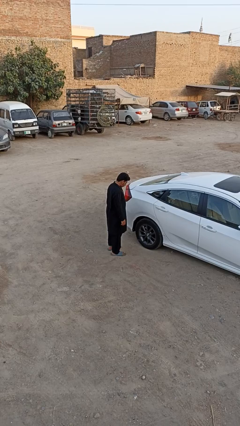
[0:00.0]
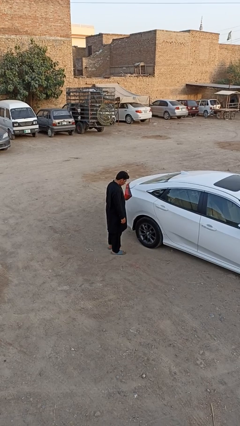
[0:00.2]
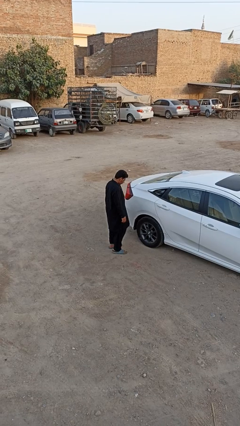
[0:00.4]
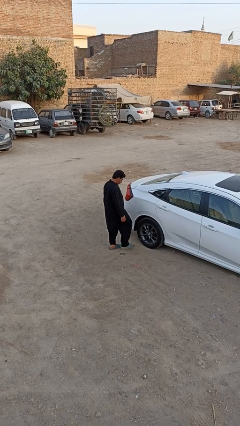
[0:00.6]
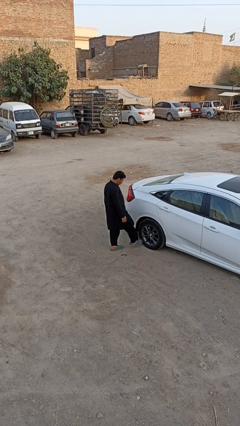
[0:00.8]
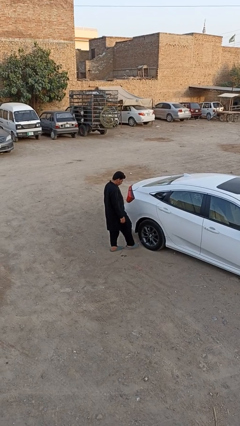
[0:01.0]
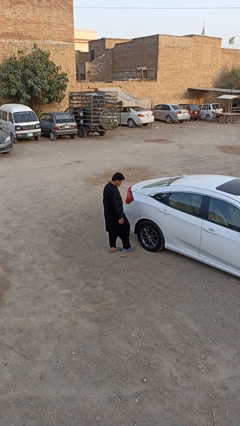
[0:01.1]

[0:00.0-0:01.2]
person kicks car tires

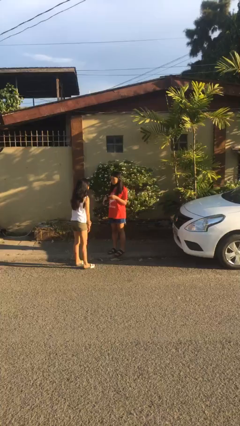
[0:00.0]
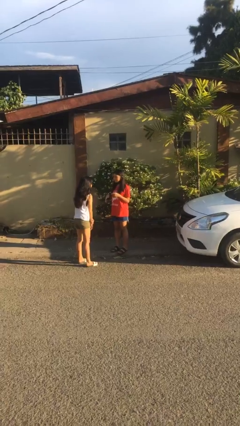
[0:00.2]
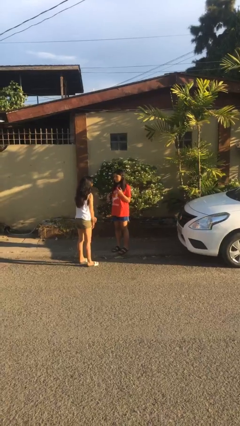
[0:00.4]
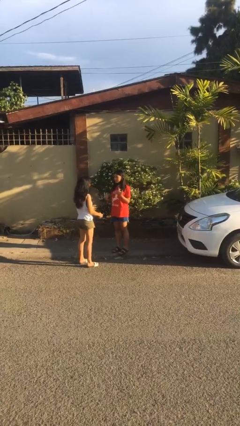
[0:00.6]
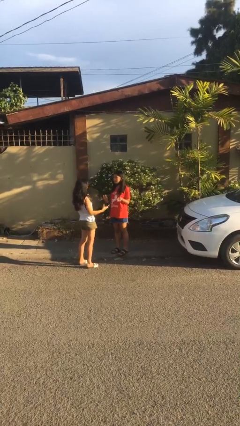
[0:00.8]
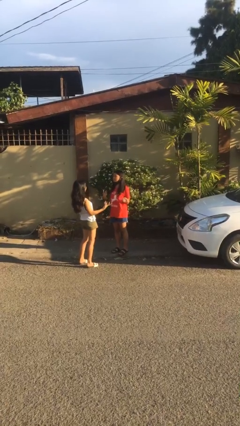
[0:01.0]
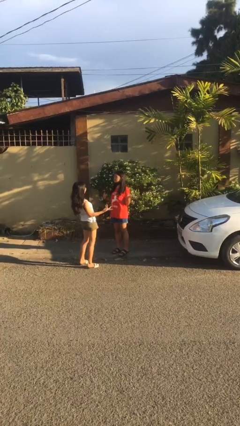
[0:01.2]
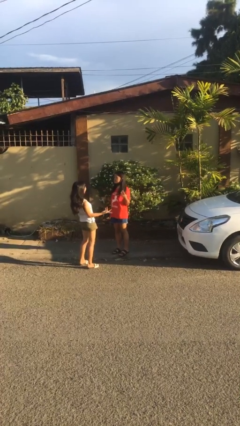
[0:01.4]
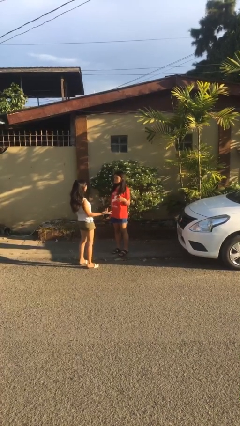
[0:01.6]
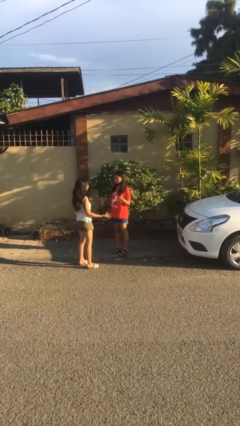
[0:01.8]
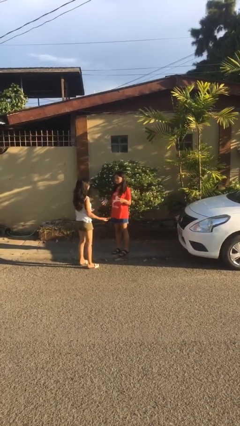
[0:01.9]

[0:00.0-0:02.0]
person laughs with person

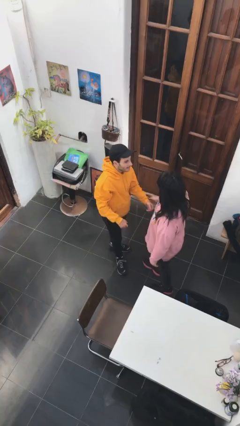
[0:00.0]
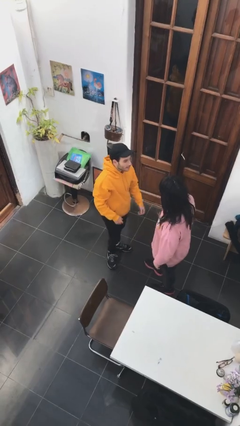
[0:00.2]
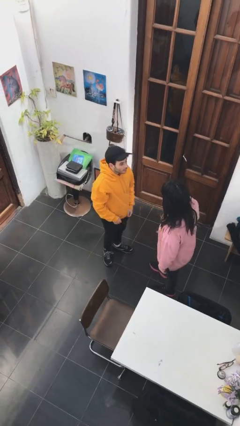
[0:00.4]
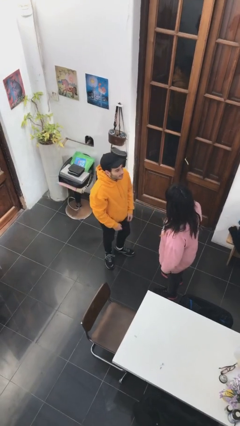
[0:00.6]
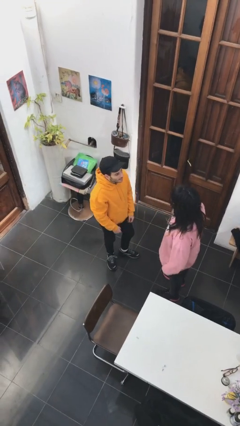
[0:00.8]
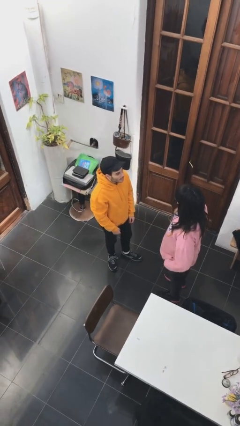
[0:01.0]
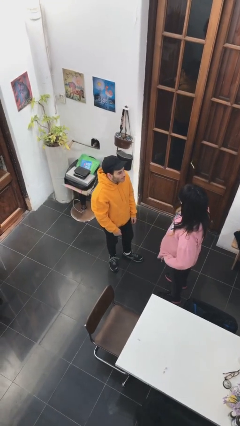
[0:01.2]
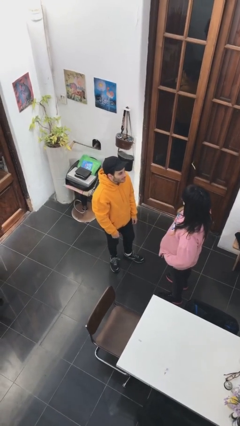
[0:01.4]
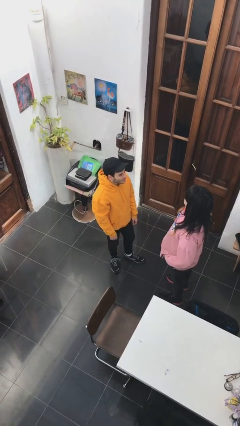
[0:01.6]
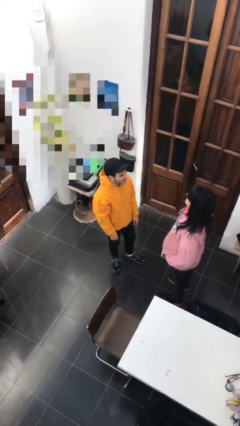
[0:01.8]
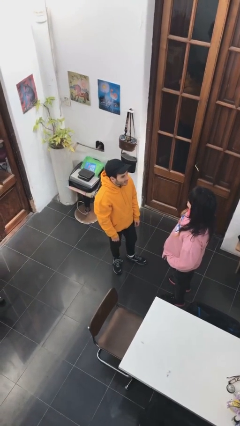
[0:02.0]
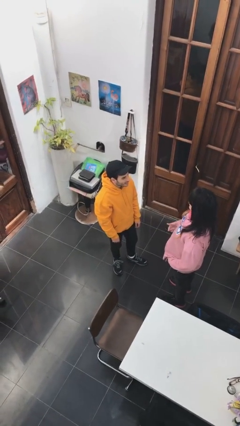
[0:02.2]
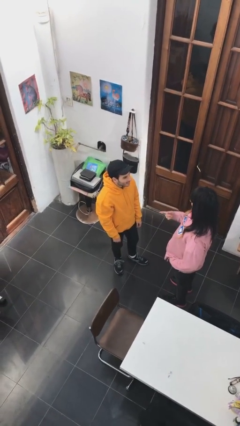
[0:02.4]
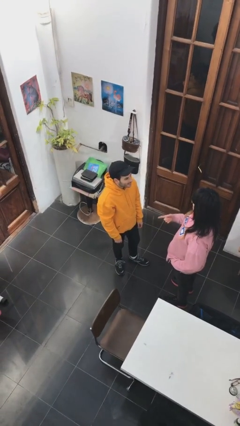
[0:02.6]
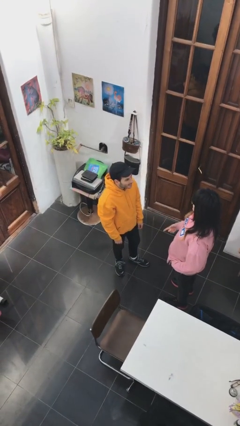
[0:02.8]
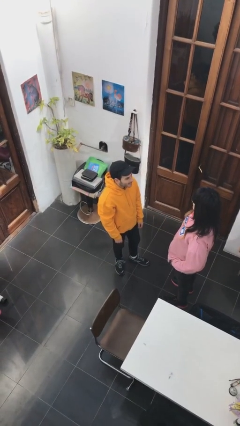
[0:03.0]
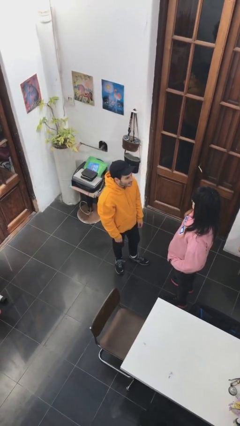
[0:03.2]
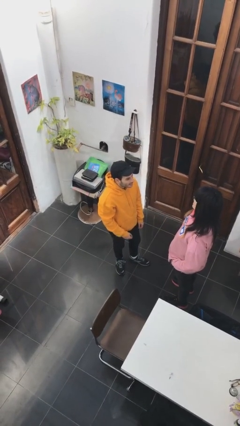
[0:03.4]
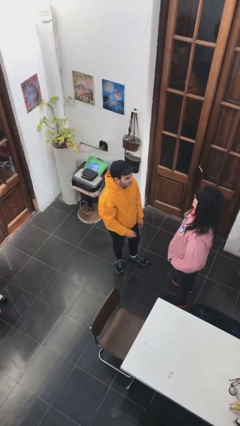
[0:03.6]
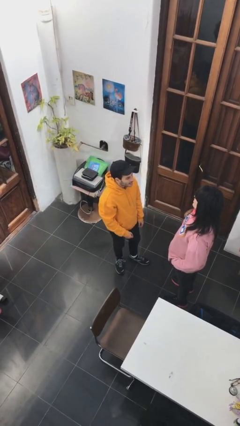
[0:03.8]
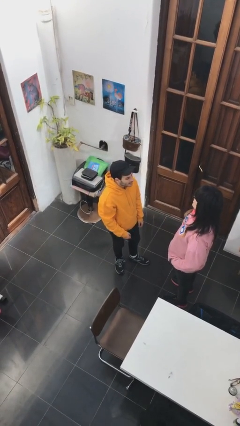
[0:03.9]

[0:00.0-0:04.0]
person talks to person

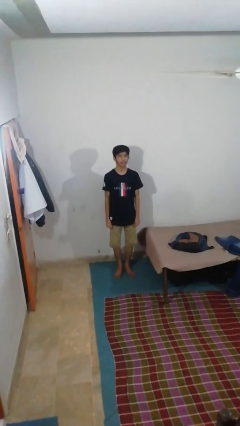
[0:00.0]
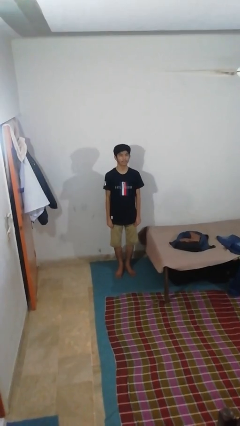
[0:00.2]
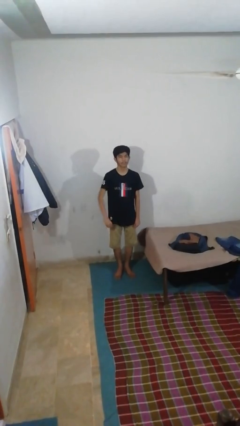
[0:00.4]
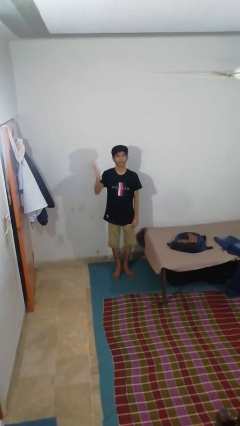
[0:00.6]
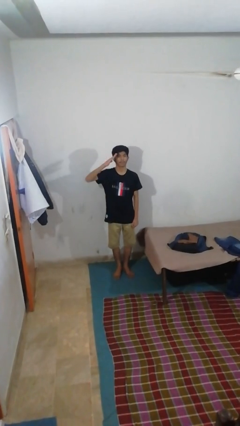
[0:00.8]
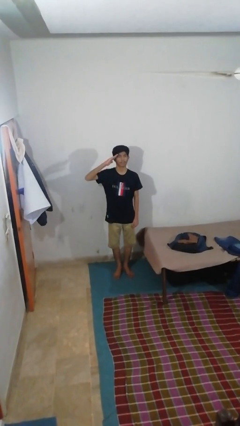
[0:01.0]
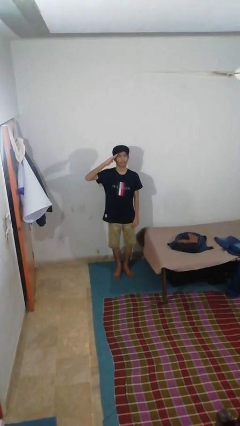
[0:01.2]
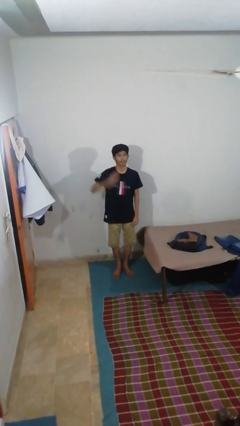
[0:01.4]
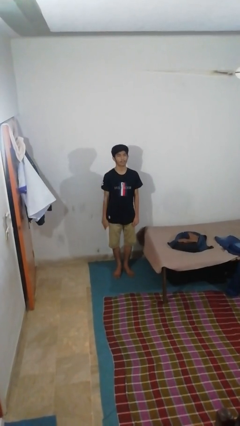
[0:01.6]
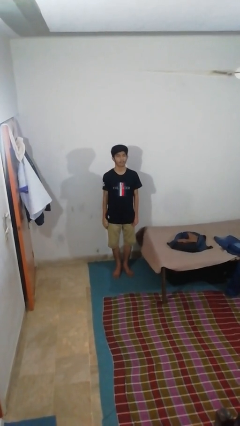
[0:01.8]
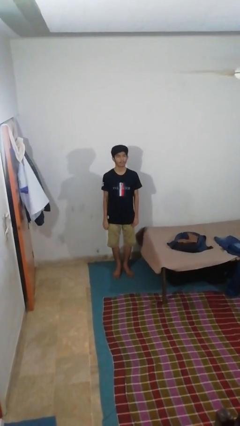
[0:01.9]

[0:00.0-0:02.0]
person salutes

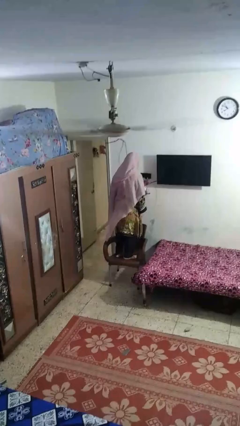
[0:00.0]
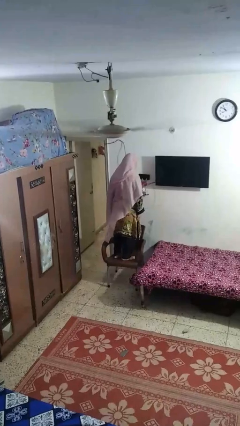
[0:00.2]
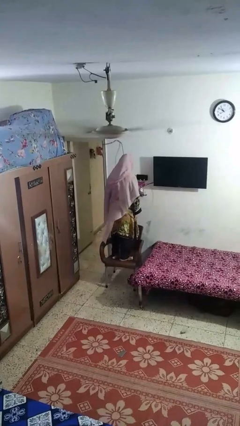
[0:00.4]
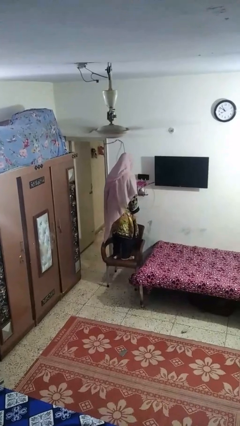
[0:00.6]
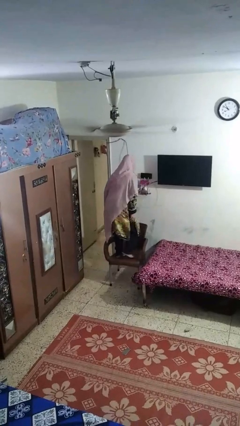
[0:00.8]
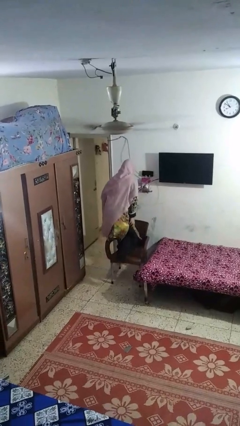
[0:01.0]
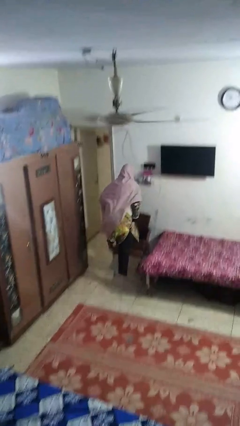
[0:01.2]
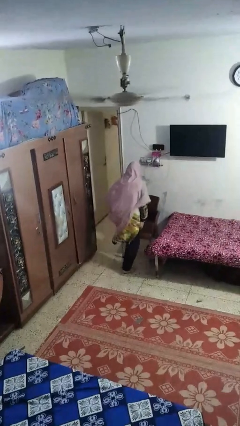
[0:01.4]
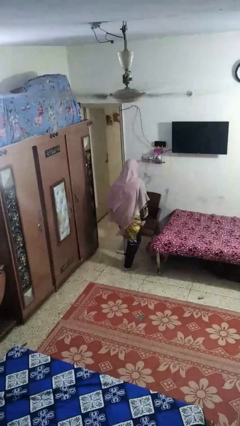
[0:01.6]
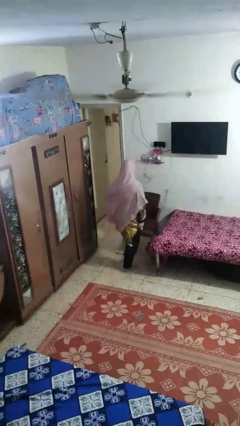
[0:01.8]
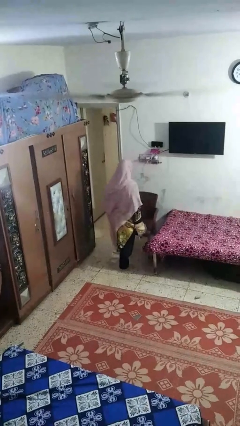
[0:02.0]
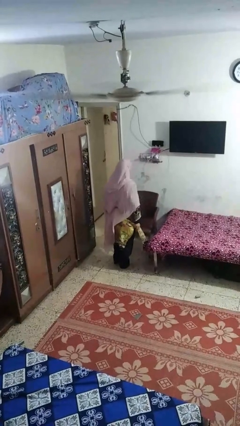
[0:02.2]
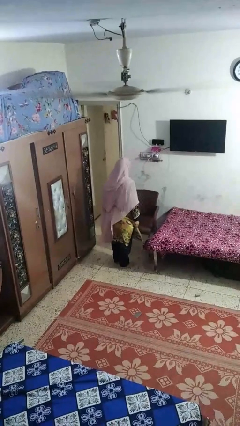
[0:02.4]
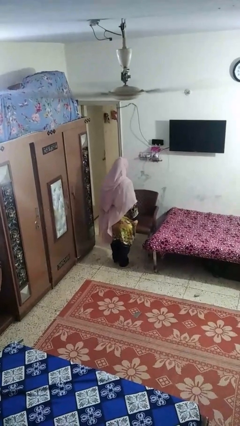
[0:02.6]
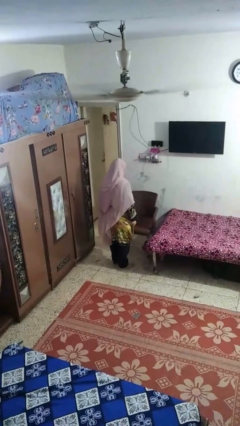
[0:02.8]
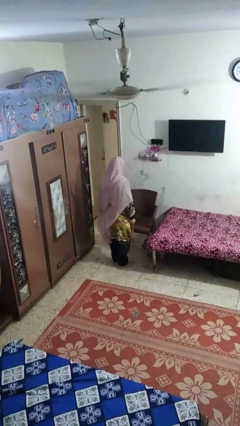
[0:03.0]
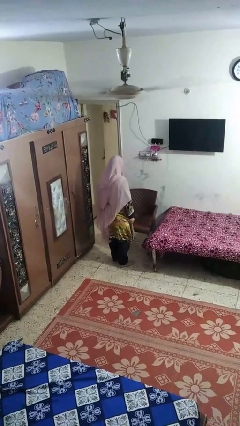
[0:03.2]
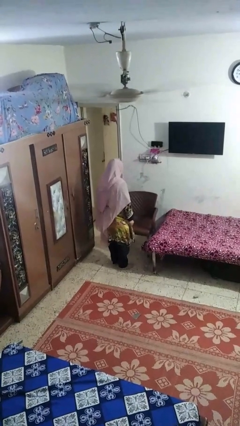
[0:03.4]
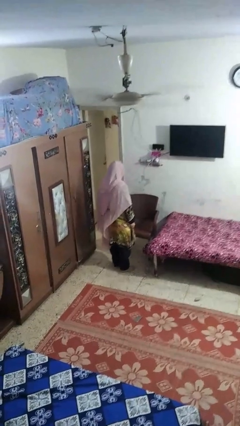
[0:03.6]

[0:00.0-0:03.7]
person climbs off chair

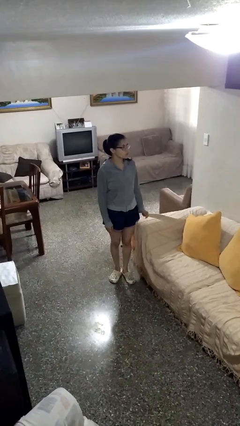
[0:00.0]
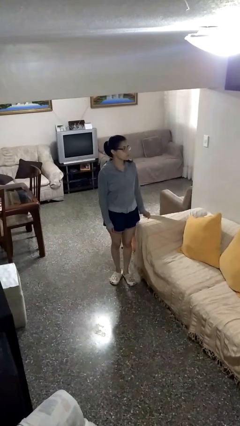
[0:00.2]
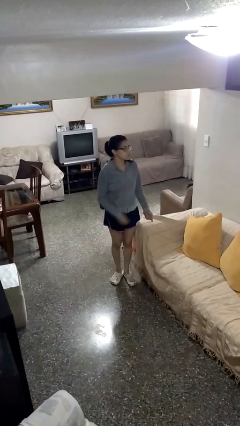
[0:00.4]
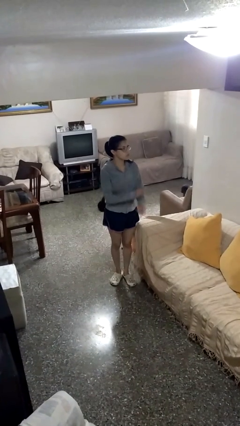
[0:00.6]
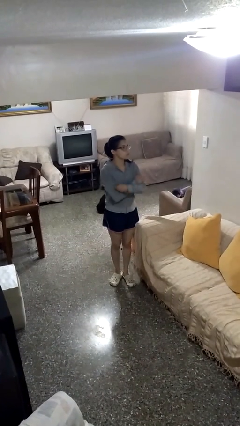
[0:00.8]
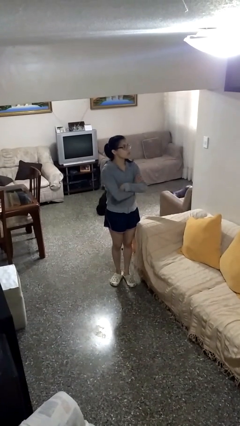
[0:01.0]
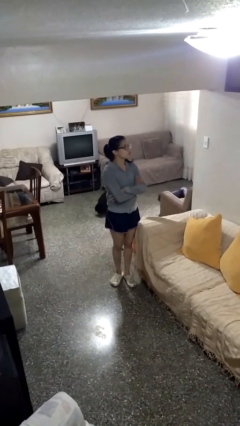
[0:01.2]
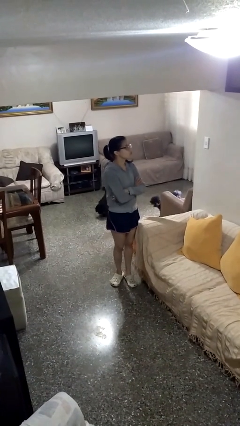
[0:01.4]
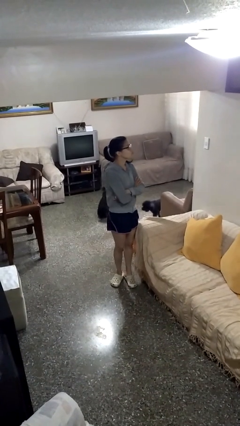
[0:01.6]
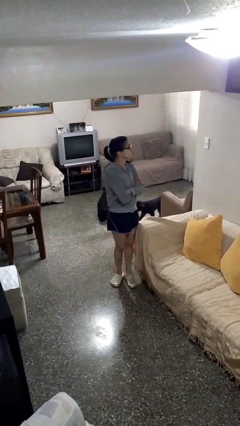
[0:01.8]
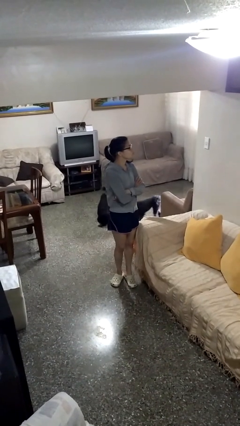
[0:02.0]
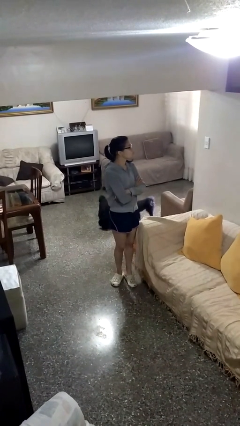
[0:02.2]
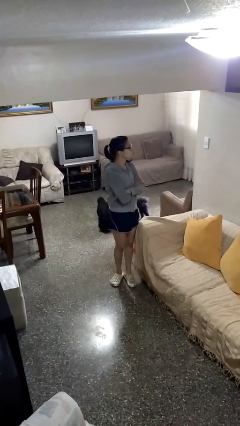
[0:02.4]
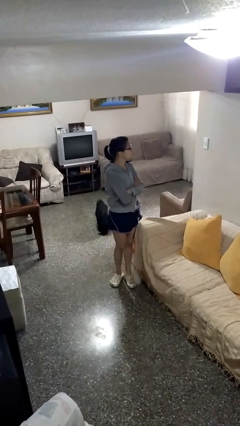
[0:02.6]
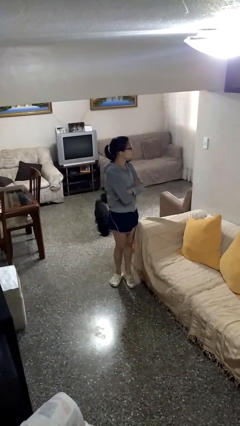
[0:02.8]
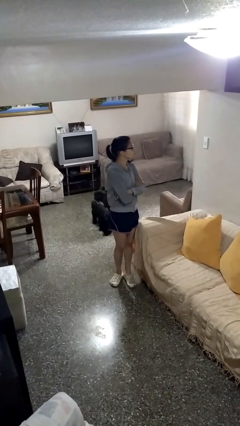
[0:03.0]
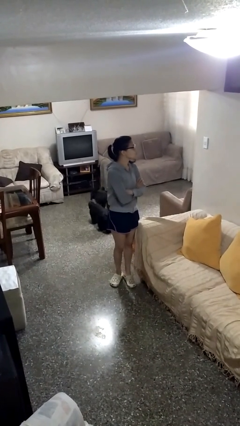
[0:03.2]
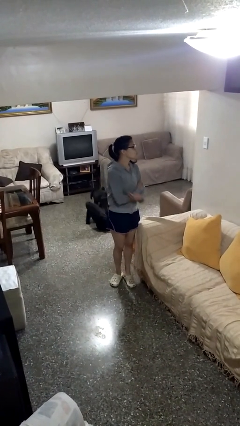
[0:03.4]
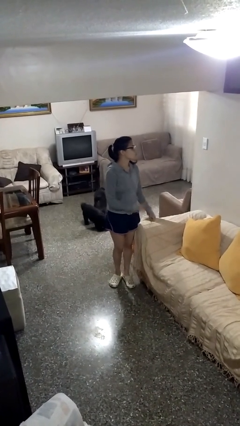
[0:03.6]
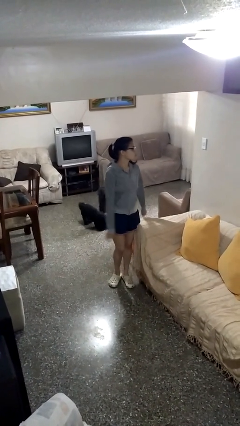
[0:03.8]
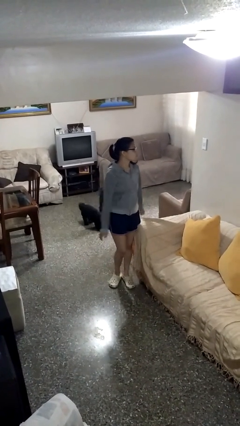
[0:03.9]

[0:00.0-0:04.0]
person crosses arms

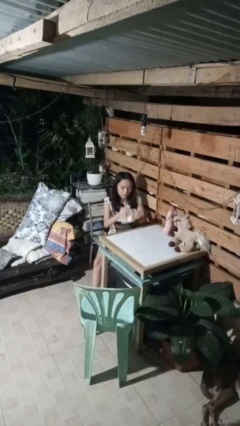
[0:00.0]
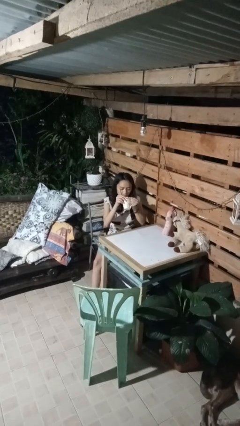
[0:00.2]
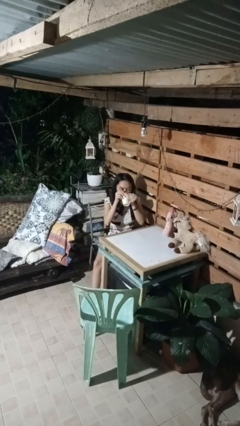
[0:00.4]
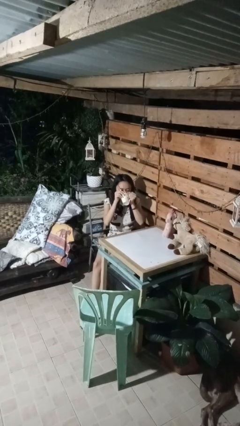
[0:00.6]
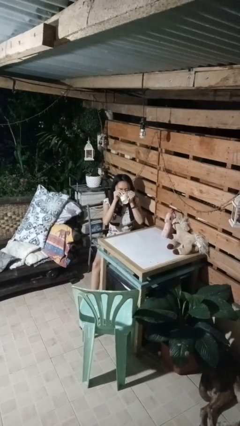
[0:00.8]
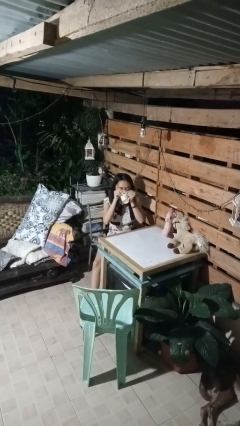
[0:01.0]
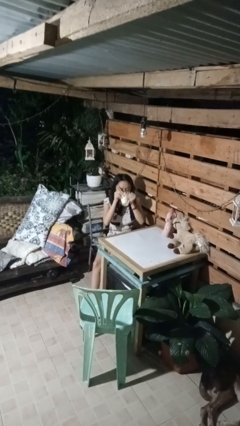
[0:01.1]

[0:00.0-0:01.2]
person drinks from mug
